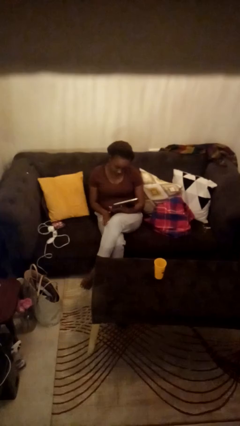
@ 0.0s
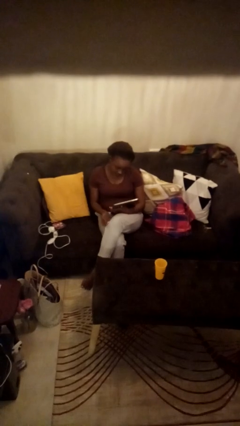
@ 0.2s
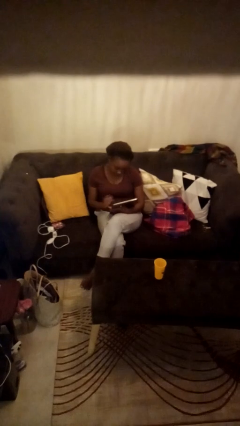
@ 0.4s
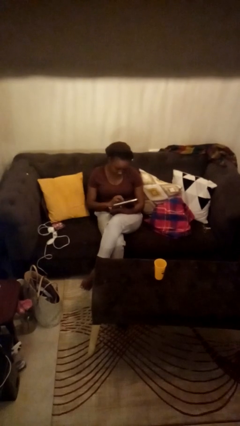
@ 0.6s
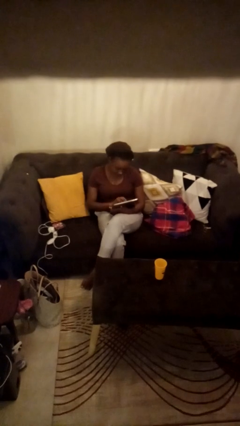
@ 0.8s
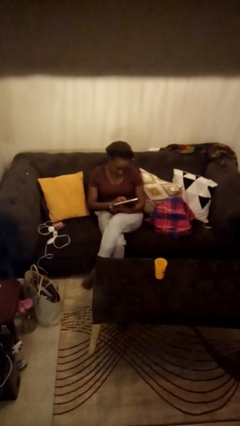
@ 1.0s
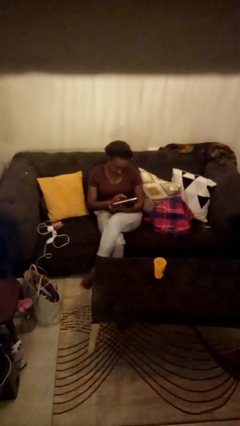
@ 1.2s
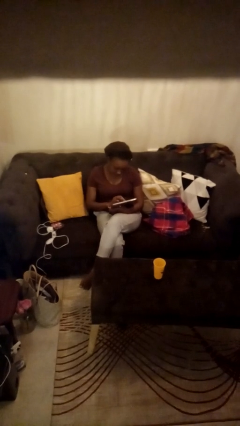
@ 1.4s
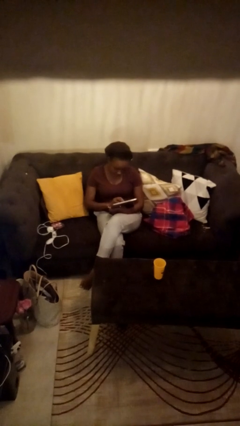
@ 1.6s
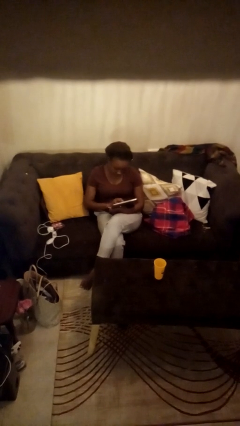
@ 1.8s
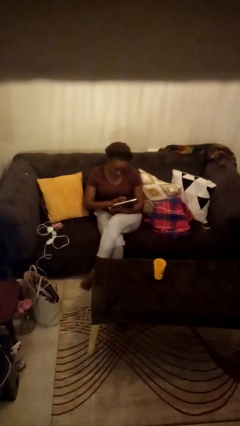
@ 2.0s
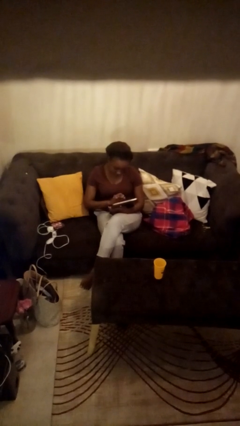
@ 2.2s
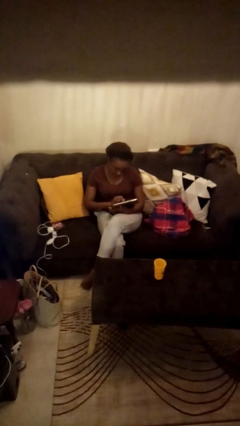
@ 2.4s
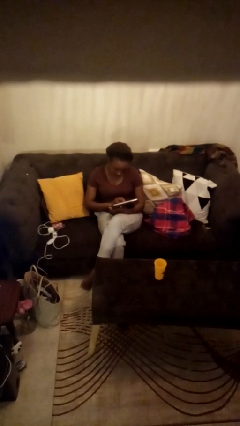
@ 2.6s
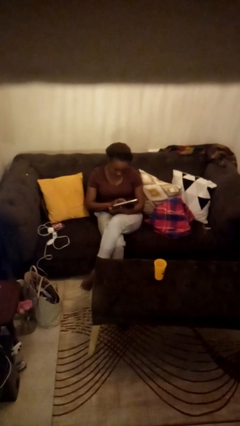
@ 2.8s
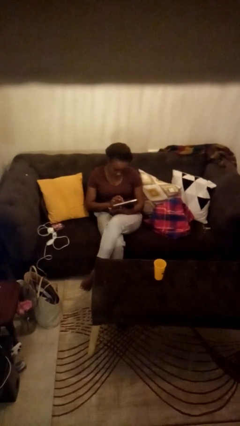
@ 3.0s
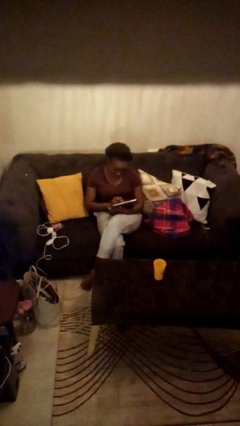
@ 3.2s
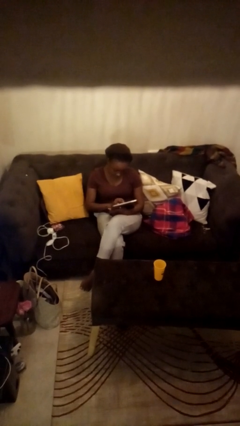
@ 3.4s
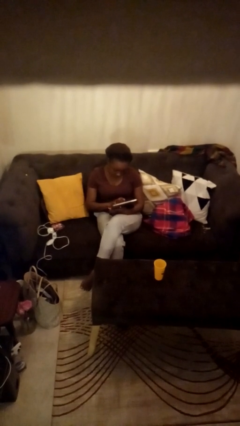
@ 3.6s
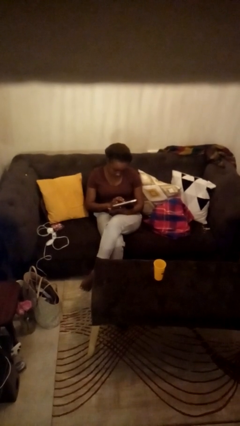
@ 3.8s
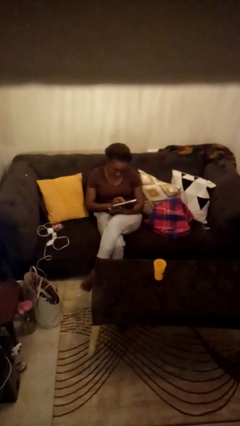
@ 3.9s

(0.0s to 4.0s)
person interacts with tablet

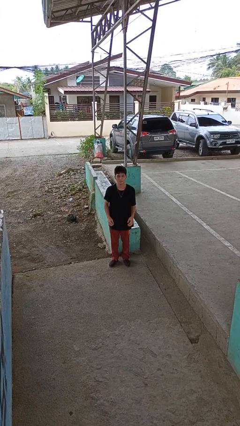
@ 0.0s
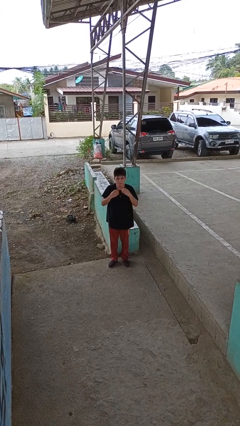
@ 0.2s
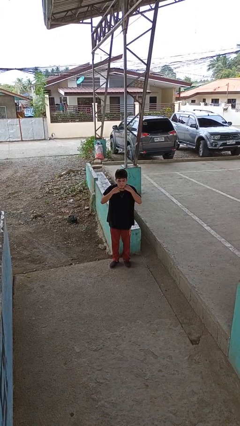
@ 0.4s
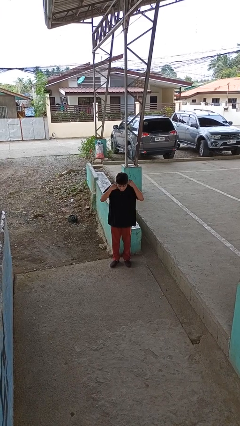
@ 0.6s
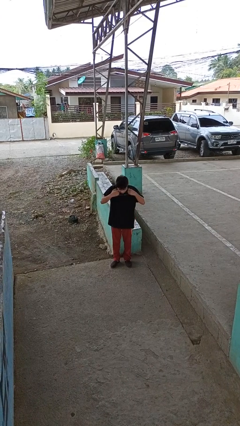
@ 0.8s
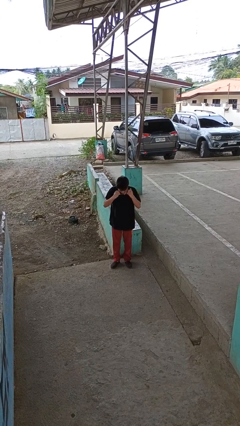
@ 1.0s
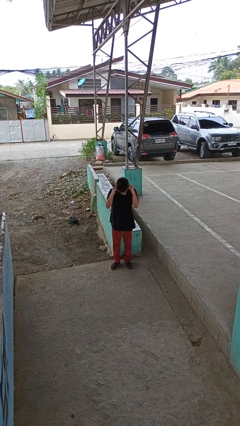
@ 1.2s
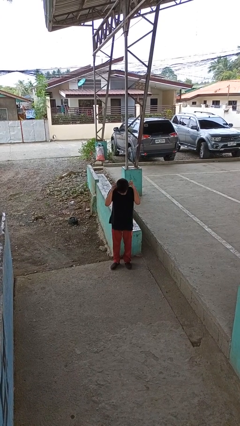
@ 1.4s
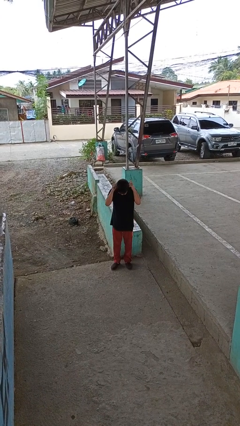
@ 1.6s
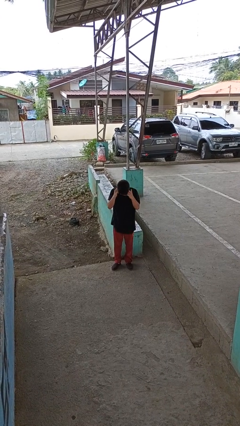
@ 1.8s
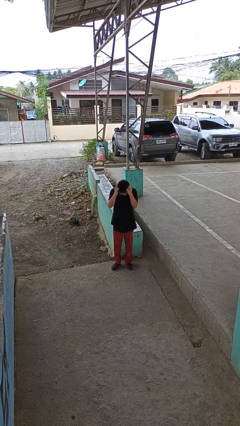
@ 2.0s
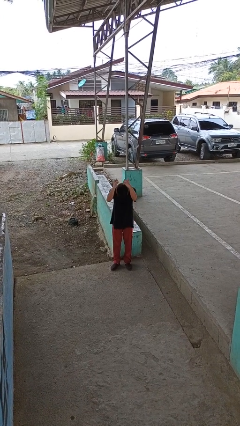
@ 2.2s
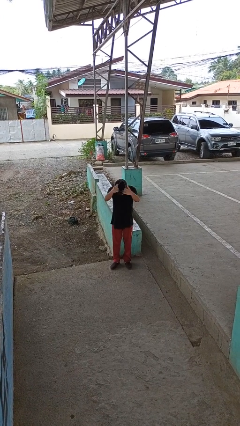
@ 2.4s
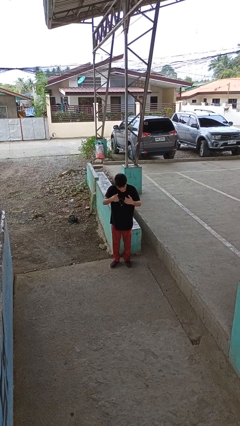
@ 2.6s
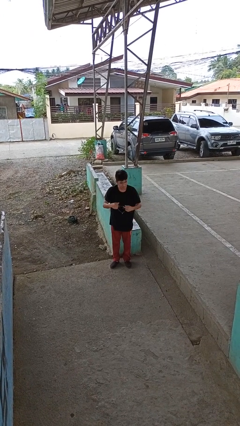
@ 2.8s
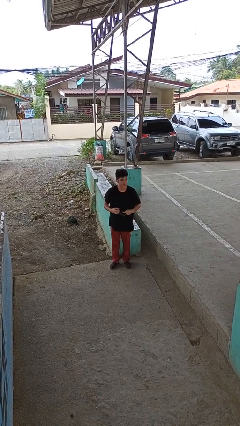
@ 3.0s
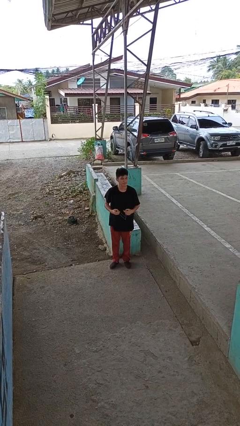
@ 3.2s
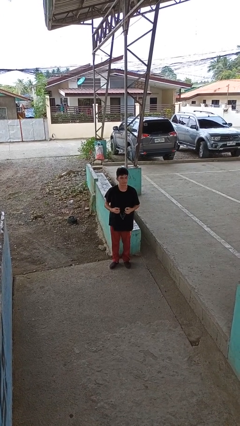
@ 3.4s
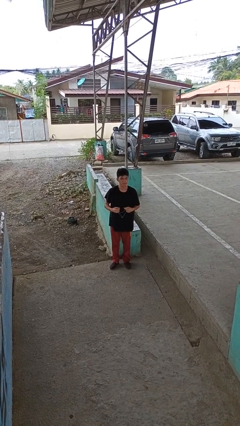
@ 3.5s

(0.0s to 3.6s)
person takes off necklace

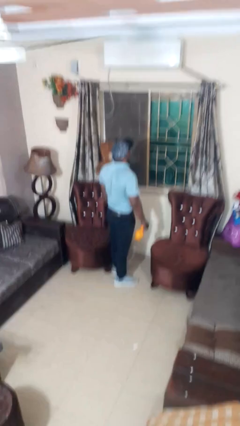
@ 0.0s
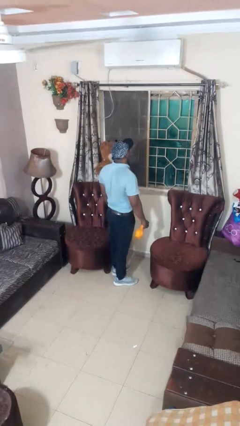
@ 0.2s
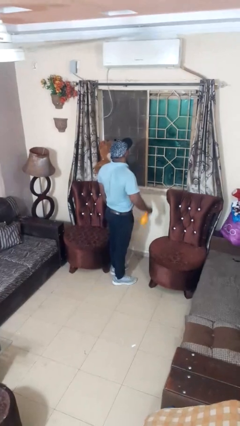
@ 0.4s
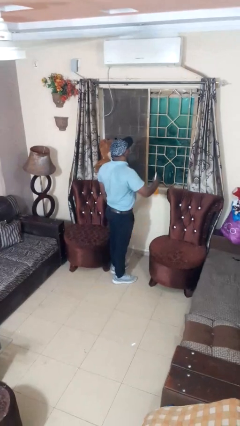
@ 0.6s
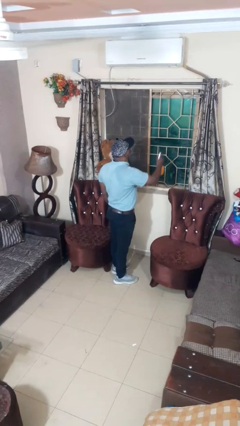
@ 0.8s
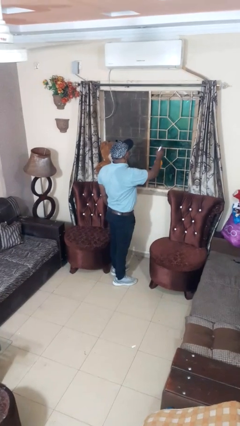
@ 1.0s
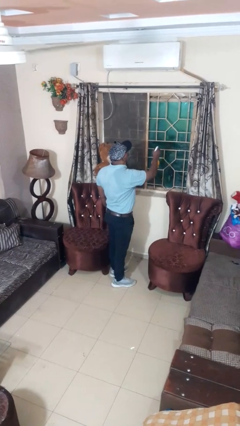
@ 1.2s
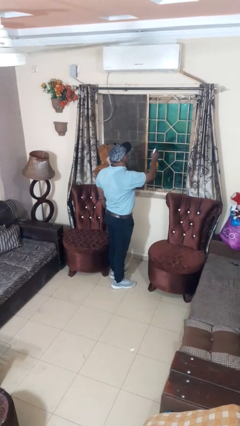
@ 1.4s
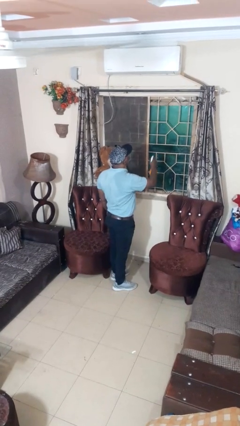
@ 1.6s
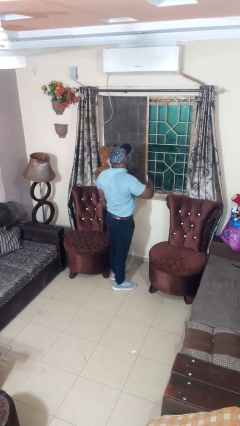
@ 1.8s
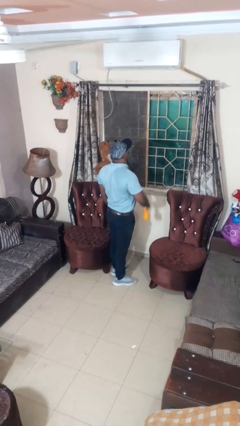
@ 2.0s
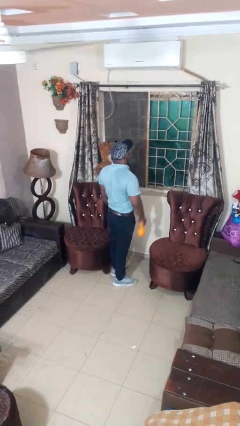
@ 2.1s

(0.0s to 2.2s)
person sprays from bottle

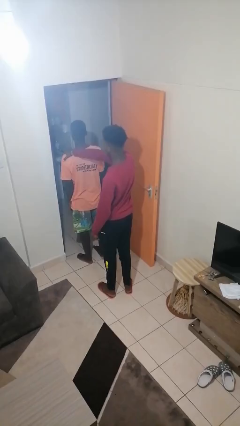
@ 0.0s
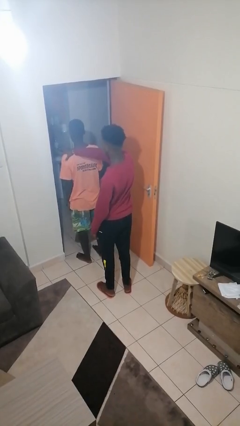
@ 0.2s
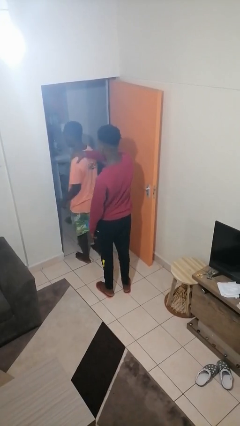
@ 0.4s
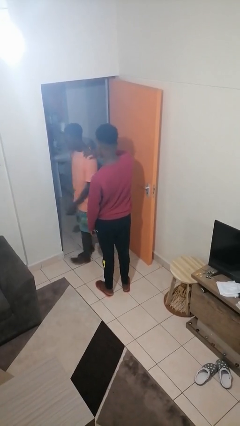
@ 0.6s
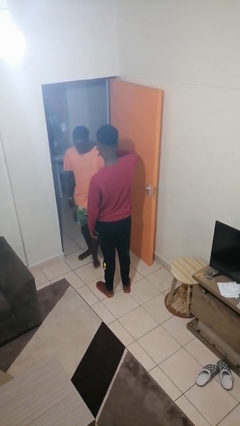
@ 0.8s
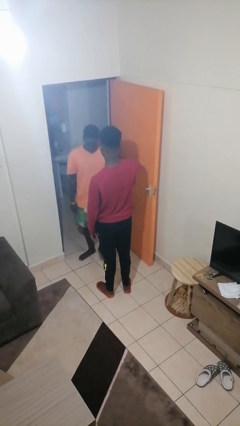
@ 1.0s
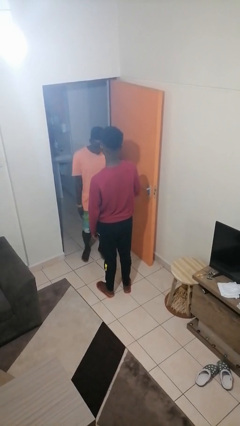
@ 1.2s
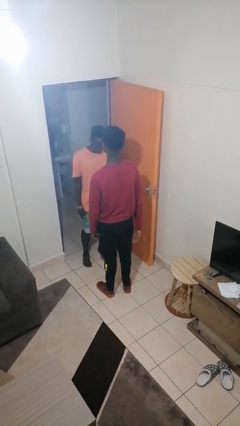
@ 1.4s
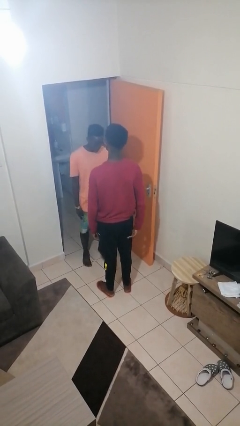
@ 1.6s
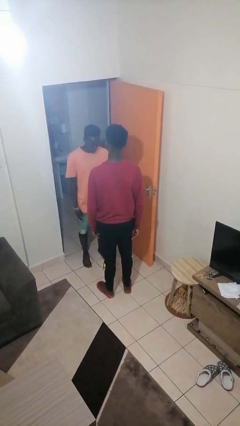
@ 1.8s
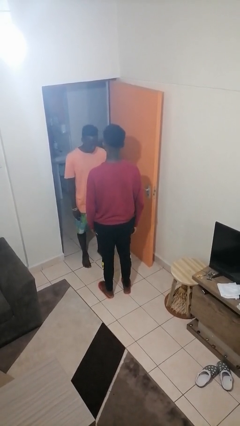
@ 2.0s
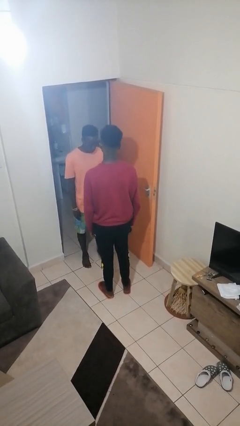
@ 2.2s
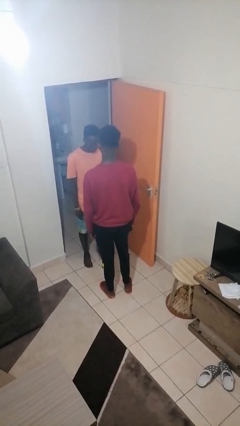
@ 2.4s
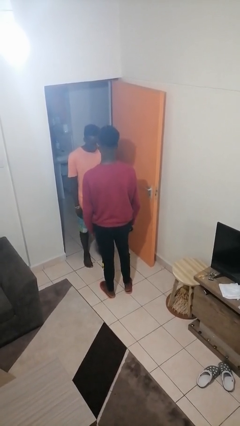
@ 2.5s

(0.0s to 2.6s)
person spins person around

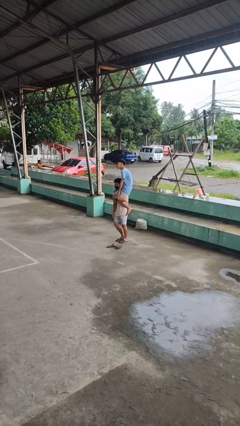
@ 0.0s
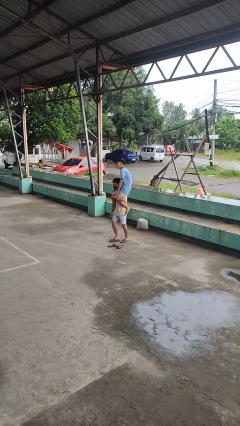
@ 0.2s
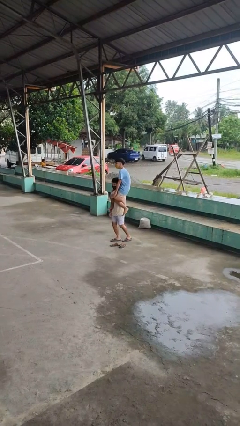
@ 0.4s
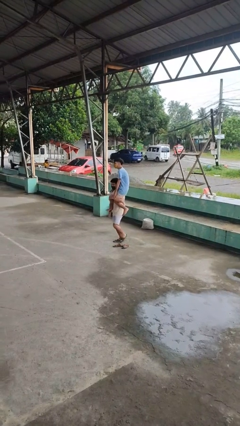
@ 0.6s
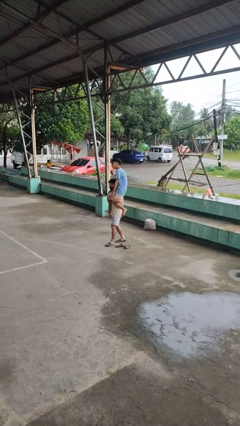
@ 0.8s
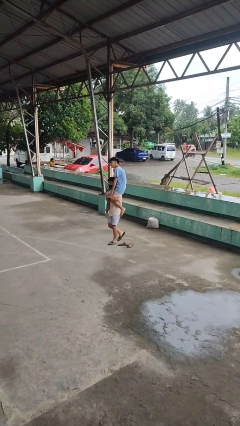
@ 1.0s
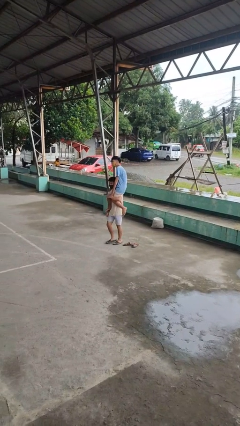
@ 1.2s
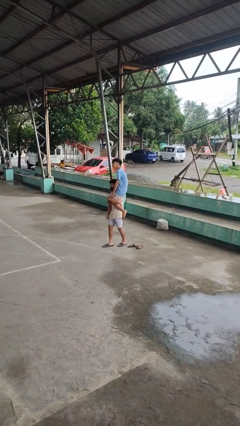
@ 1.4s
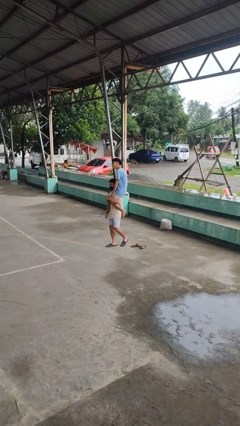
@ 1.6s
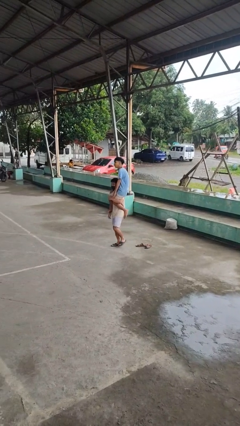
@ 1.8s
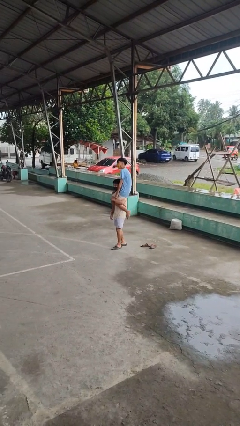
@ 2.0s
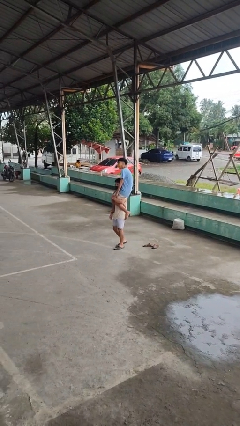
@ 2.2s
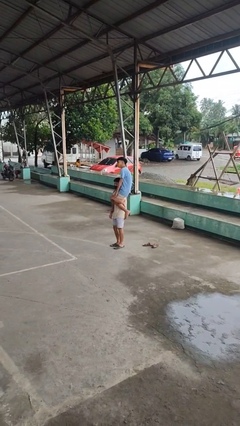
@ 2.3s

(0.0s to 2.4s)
person carries person on shoulders

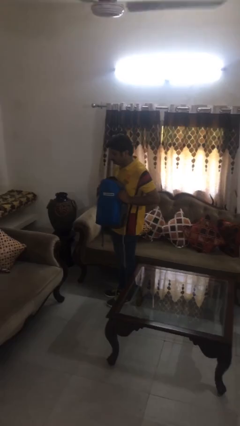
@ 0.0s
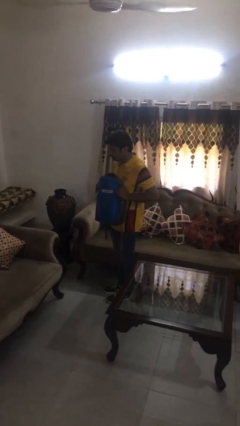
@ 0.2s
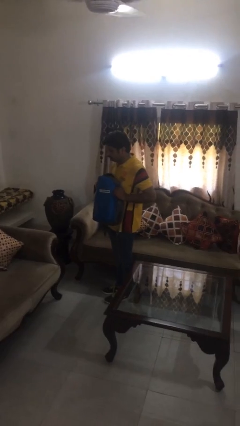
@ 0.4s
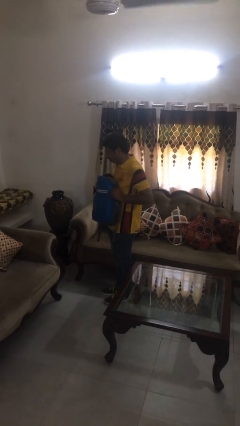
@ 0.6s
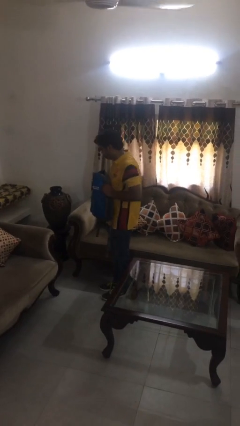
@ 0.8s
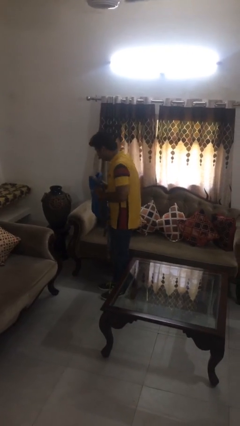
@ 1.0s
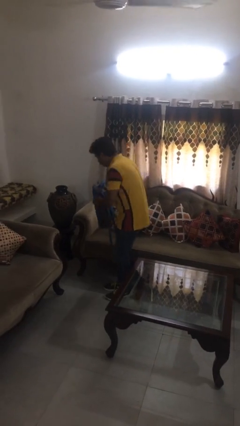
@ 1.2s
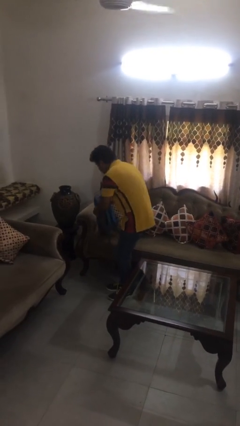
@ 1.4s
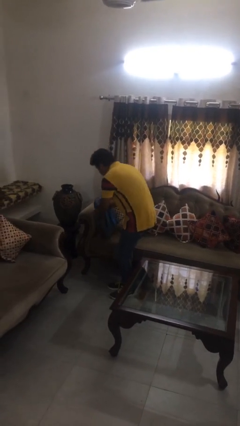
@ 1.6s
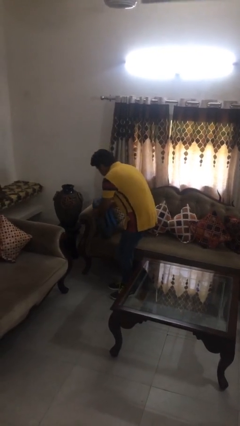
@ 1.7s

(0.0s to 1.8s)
person puts down object on couch

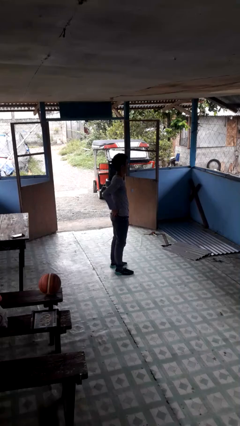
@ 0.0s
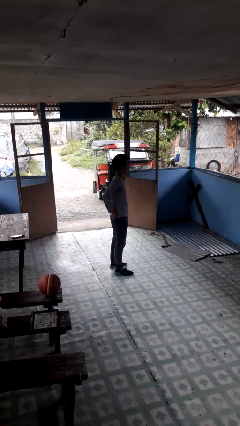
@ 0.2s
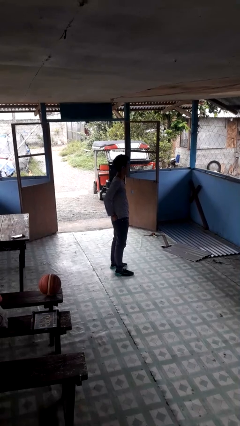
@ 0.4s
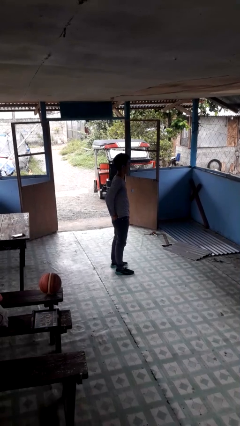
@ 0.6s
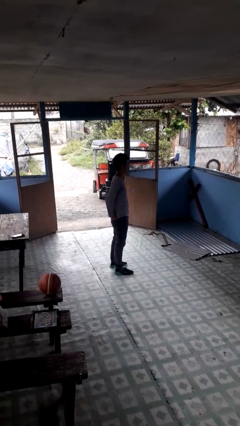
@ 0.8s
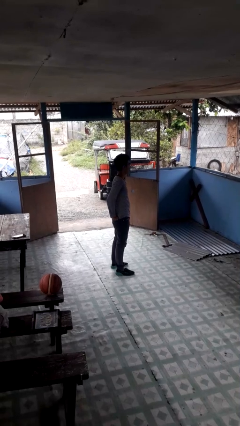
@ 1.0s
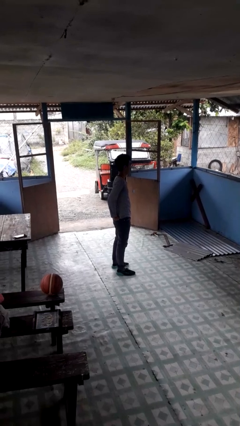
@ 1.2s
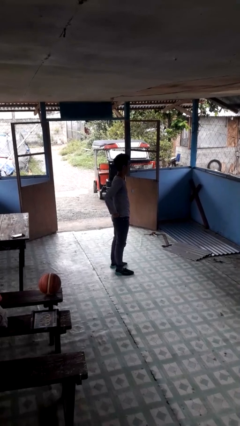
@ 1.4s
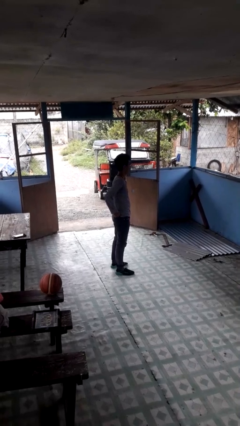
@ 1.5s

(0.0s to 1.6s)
person puts hands in back pockets
